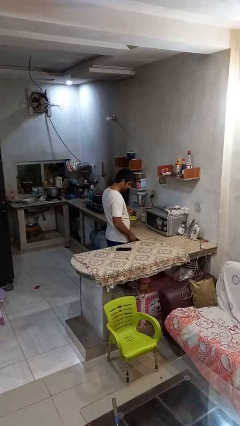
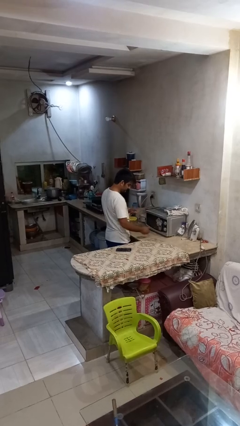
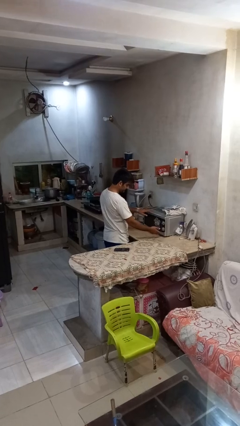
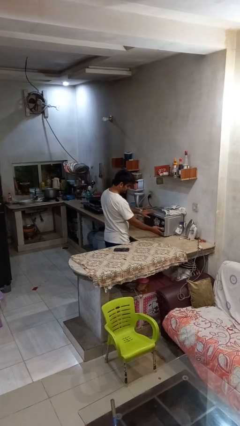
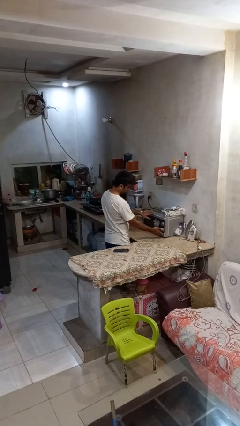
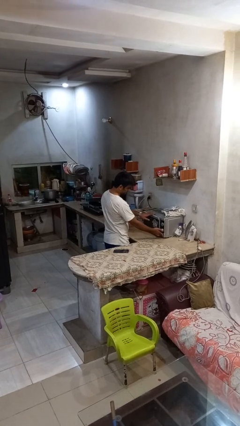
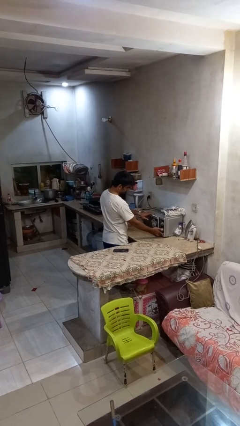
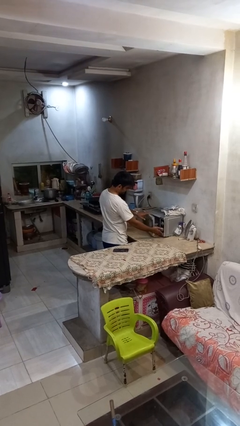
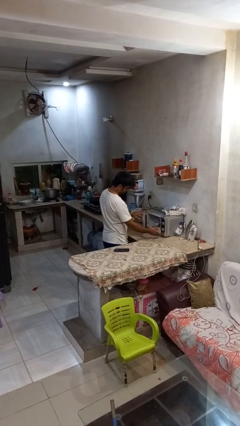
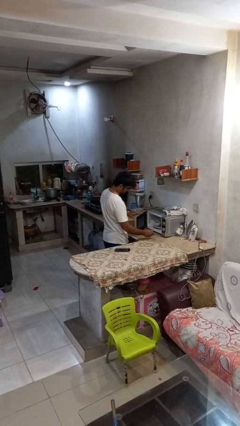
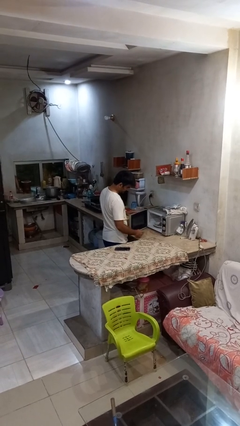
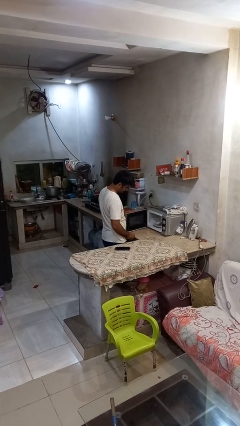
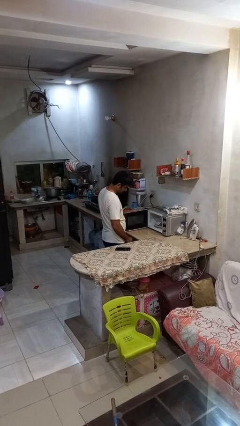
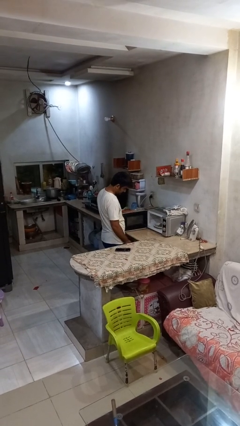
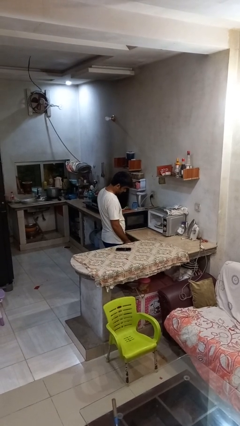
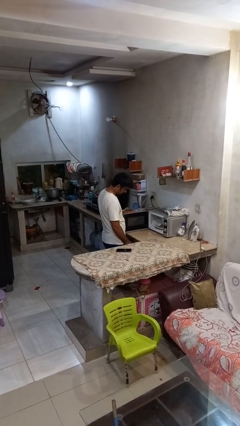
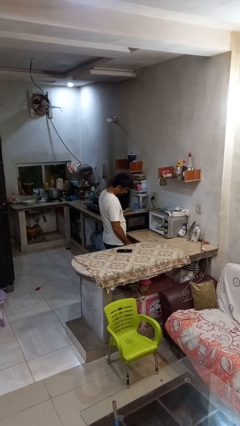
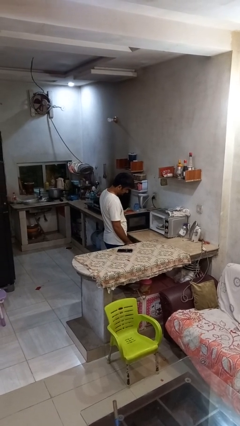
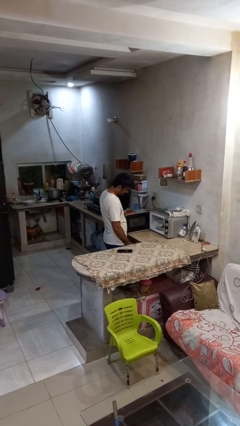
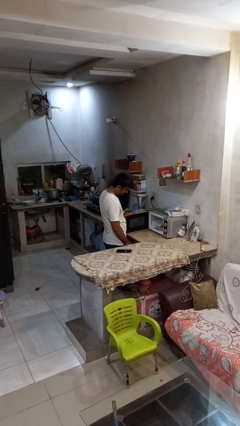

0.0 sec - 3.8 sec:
person opens microwave

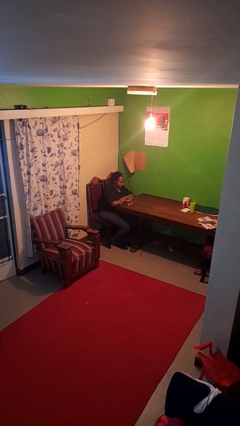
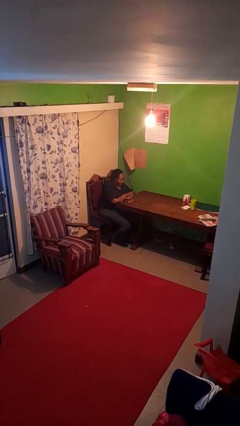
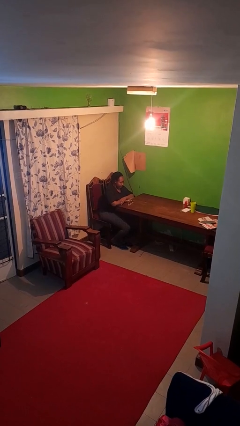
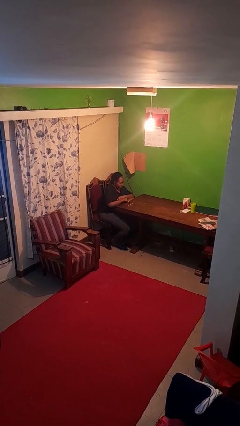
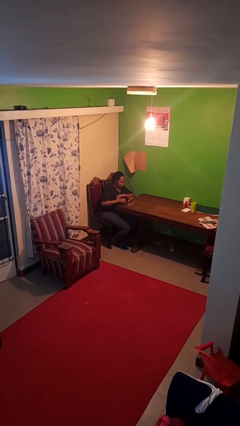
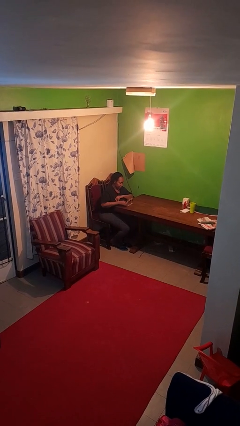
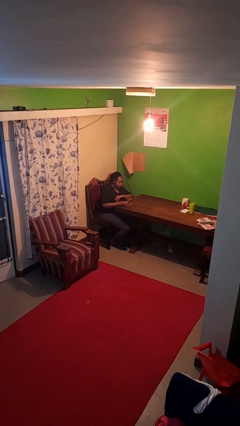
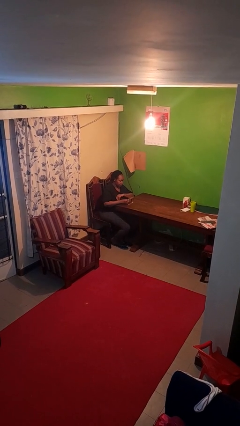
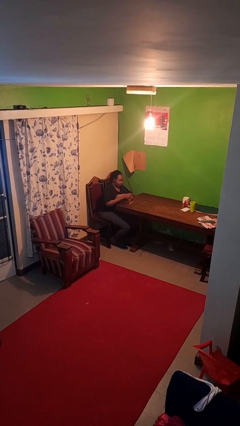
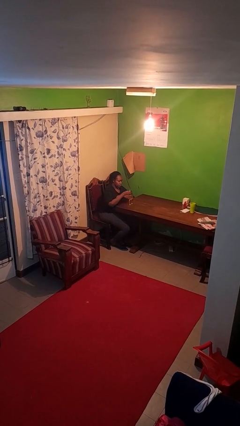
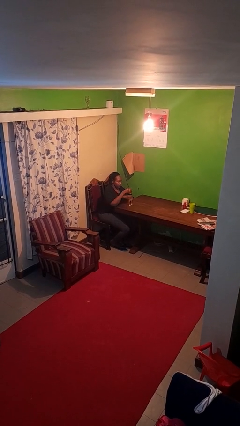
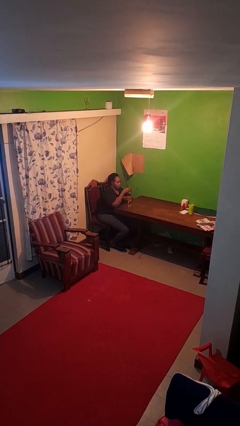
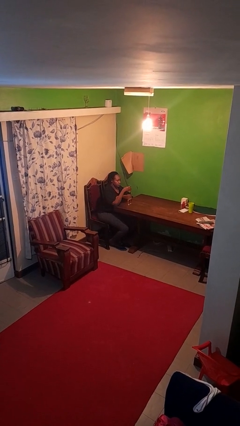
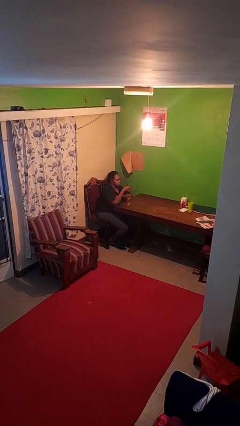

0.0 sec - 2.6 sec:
person picks up object from table

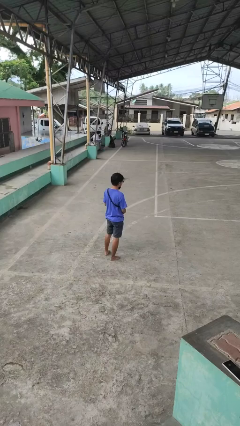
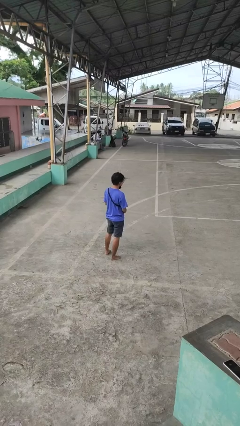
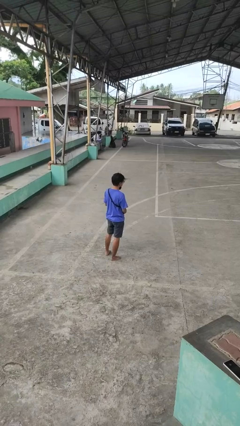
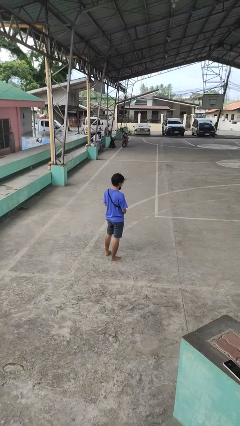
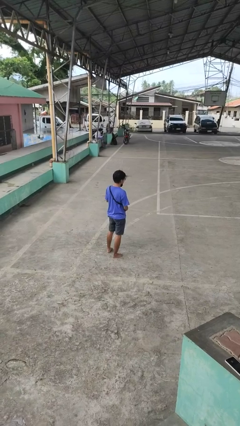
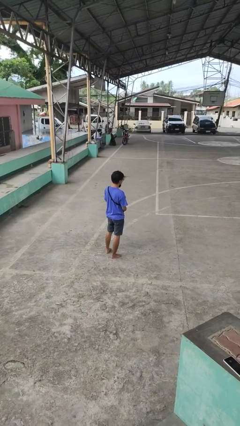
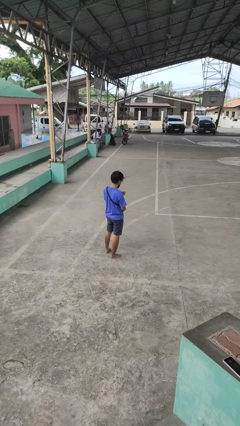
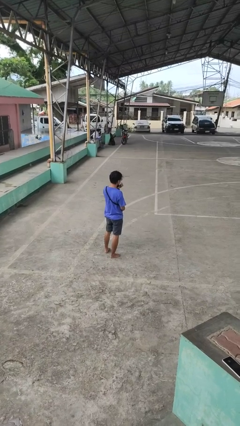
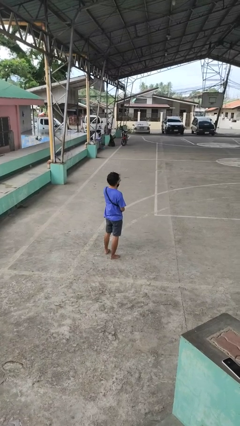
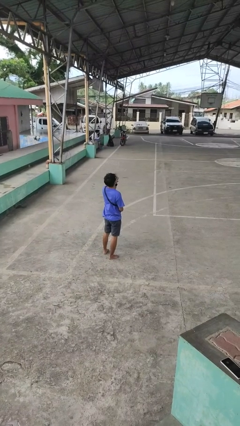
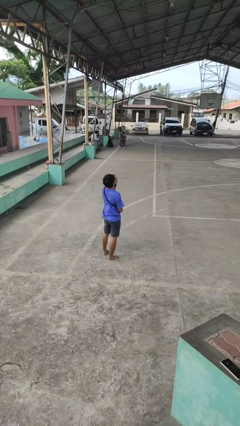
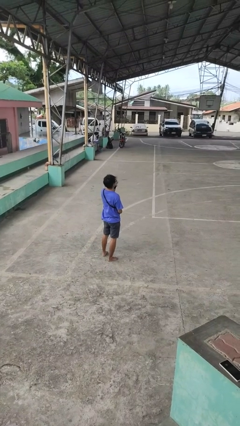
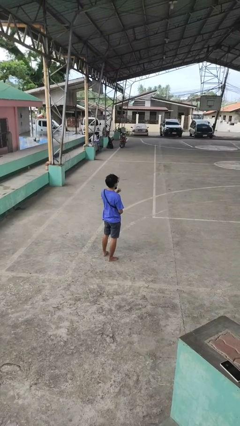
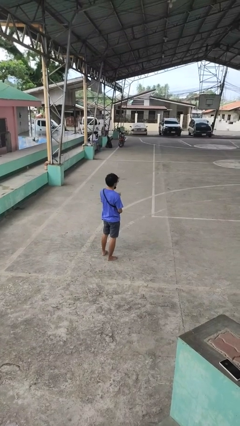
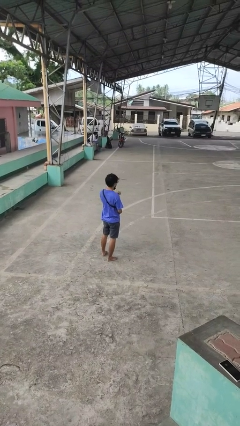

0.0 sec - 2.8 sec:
person eats snack from bag

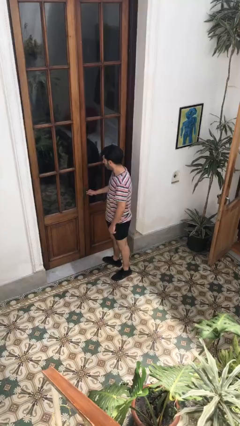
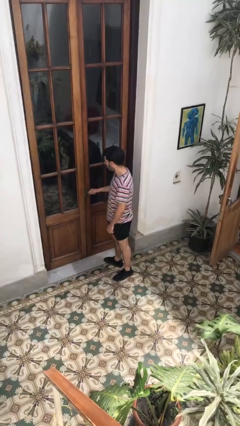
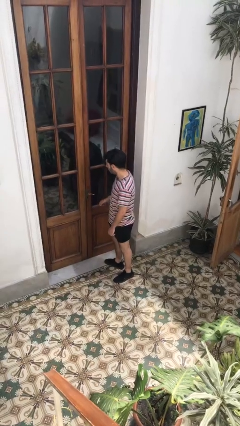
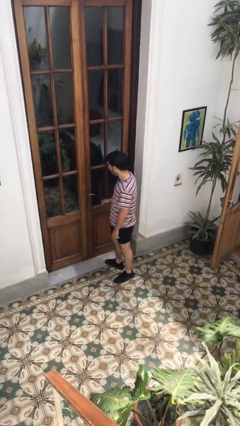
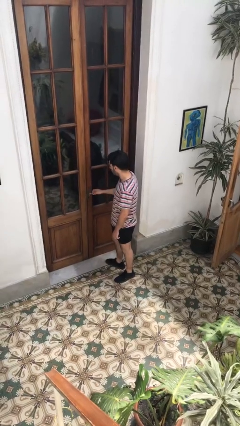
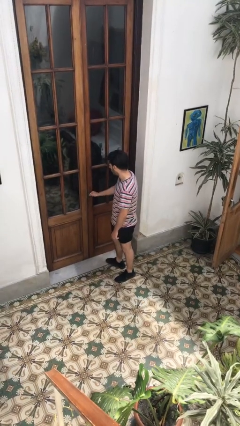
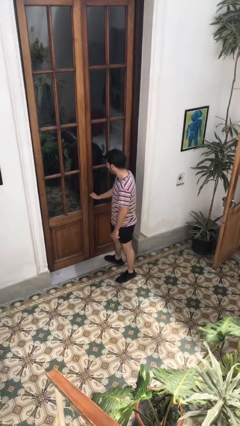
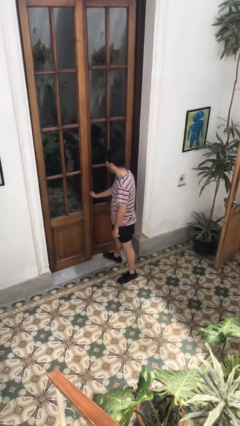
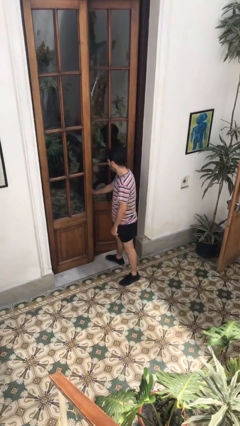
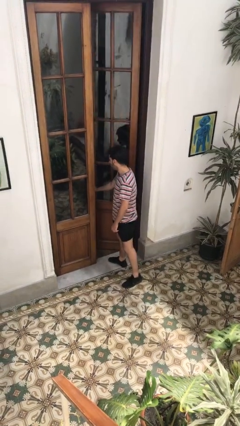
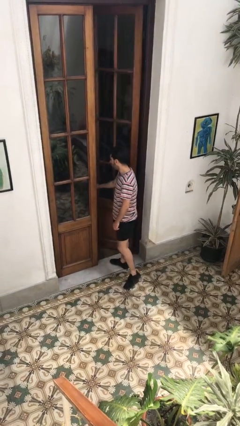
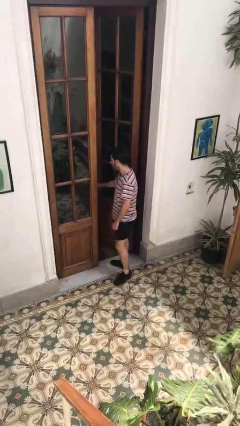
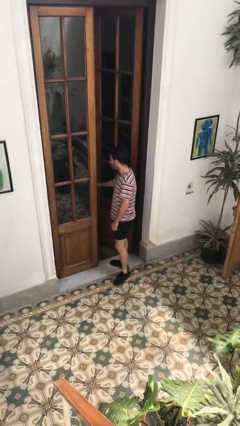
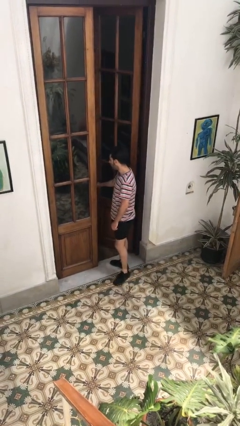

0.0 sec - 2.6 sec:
person opens facility door

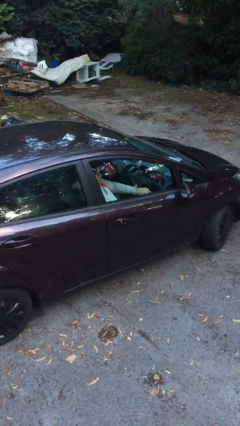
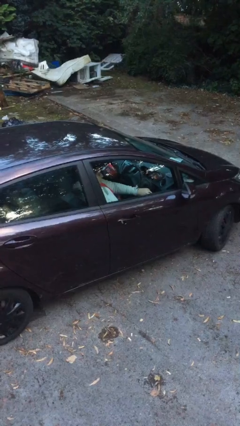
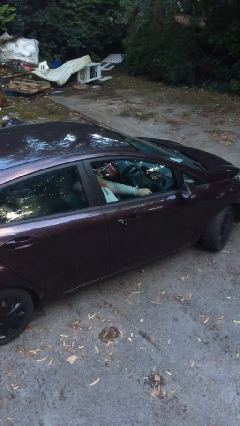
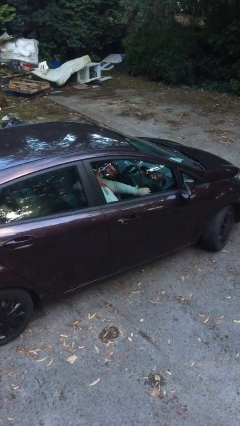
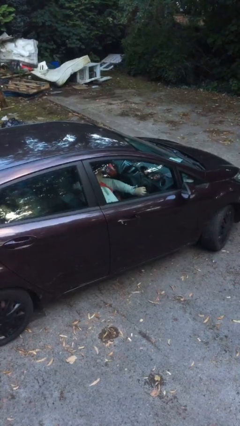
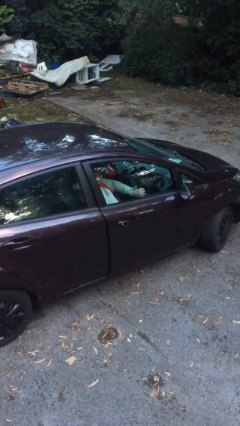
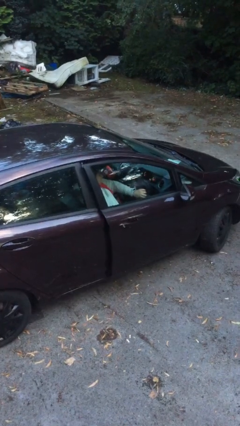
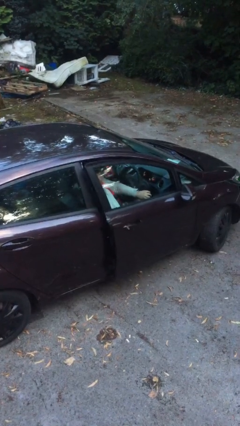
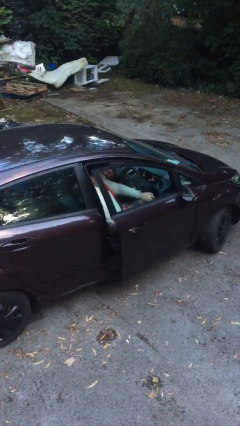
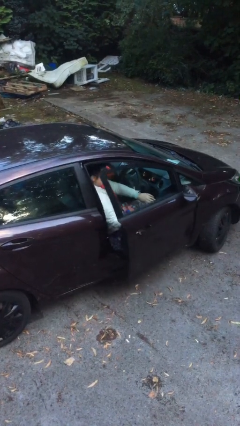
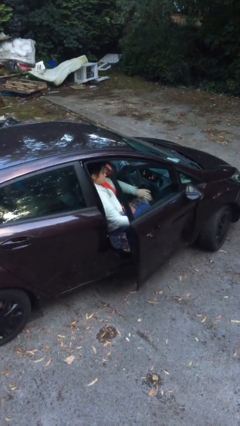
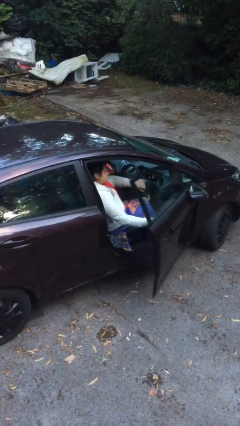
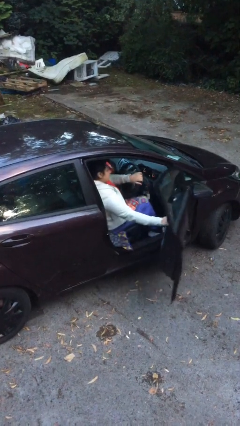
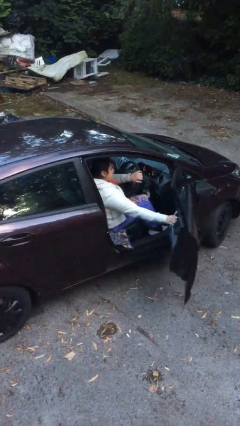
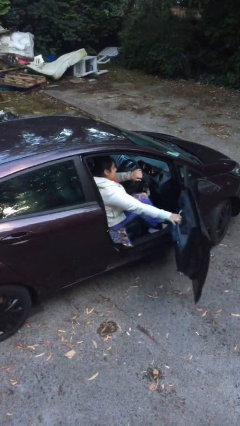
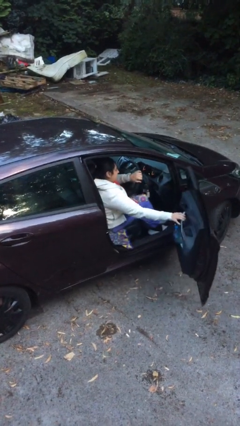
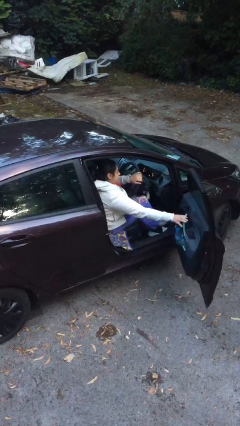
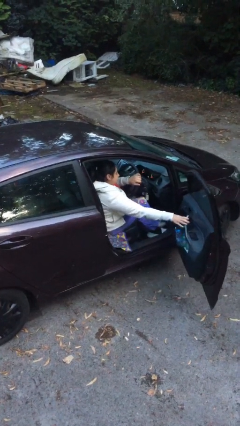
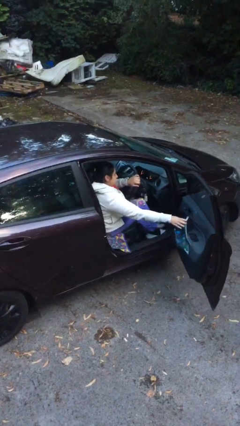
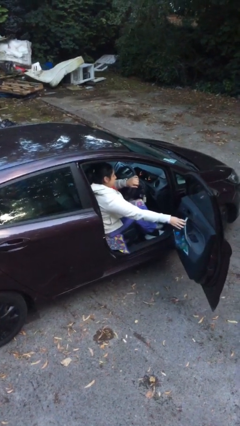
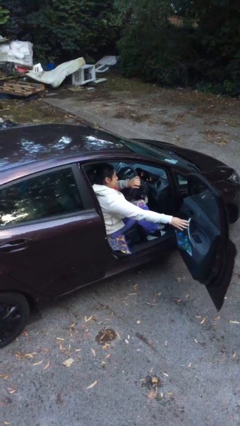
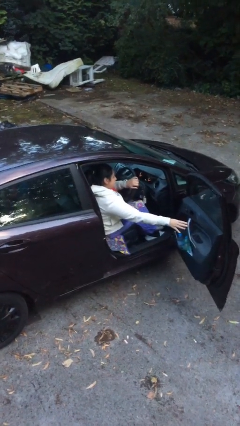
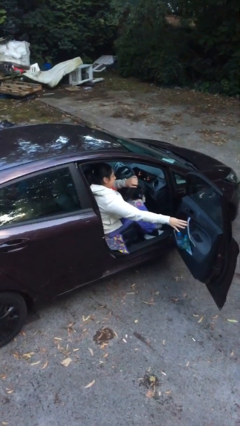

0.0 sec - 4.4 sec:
person opens car door
